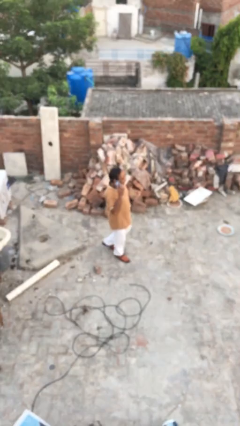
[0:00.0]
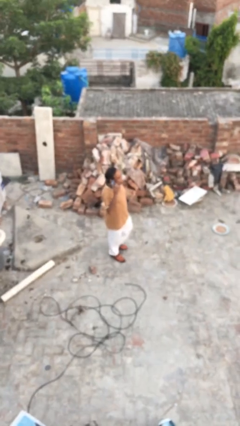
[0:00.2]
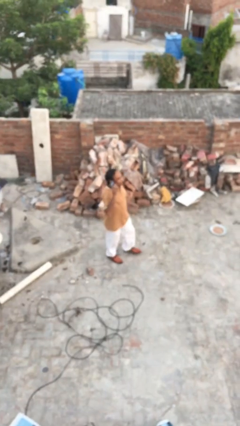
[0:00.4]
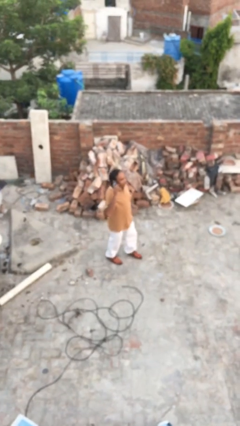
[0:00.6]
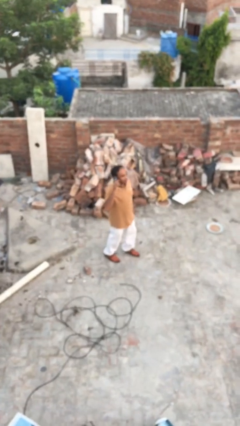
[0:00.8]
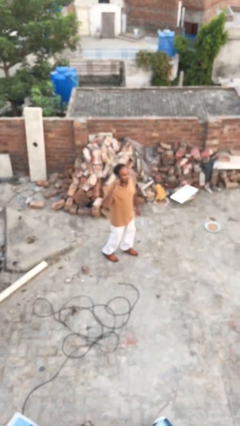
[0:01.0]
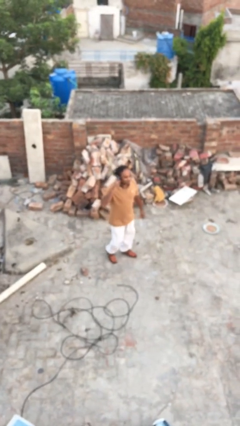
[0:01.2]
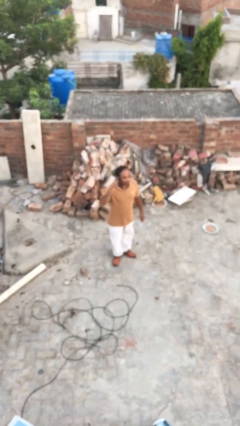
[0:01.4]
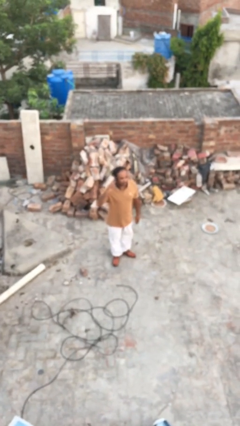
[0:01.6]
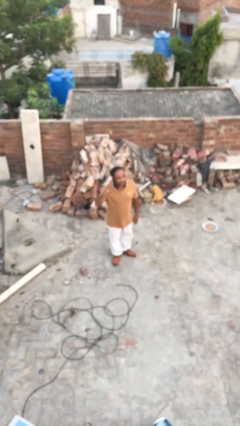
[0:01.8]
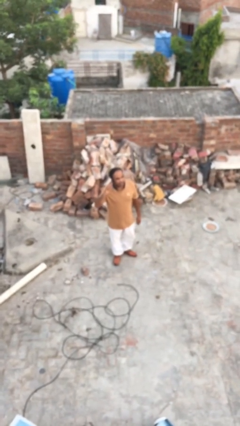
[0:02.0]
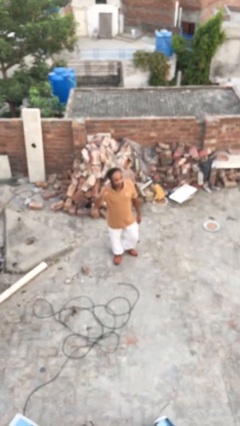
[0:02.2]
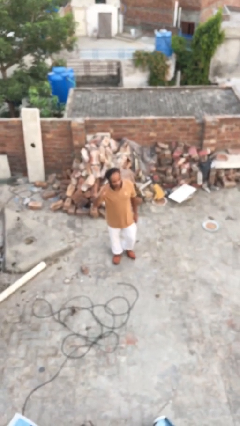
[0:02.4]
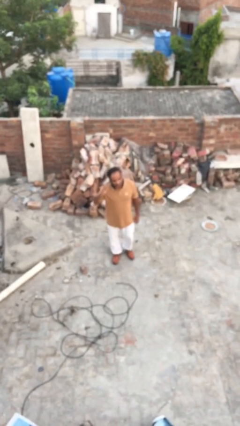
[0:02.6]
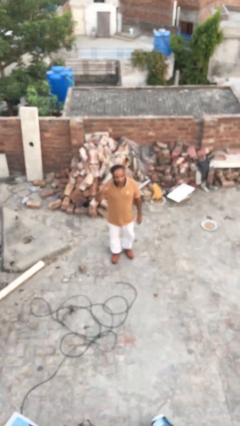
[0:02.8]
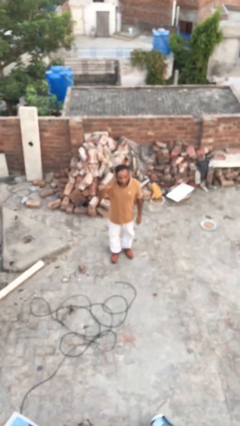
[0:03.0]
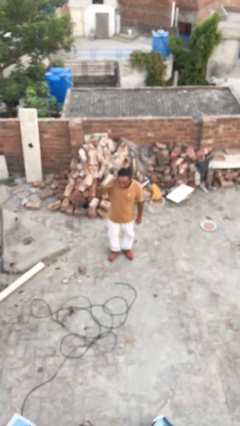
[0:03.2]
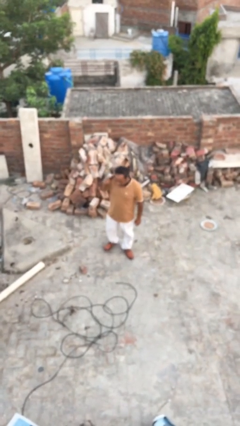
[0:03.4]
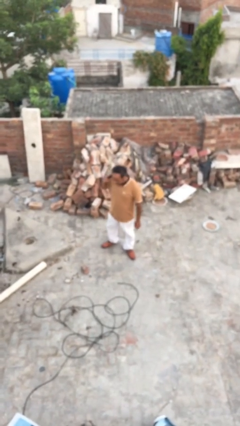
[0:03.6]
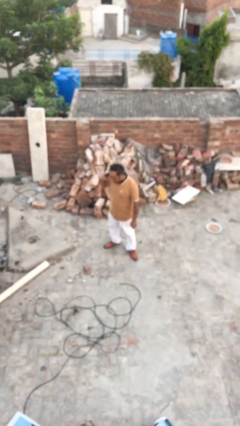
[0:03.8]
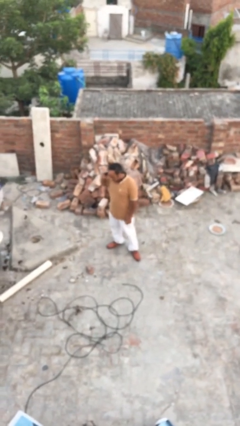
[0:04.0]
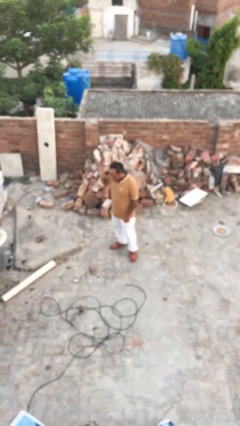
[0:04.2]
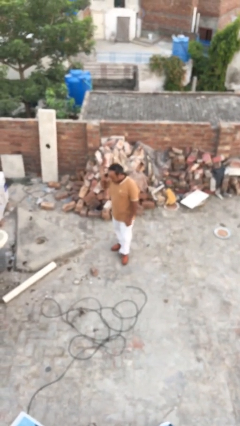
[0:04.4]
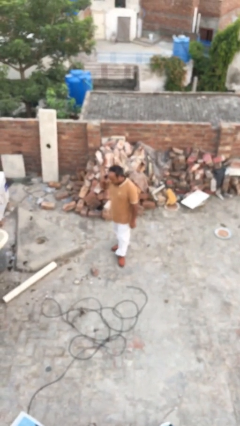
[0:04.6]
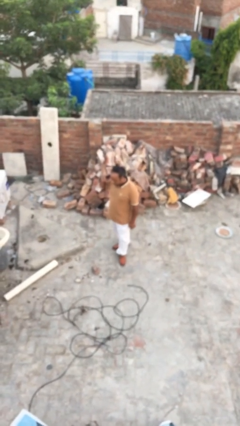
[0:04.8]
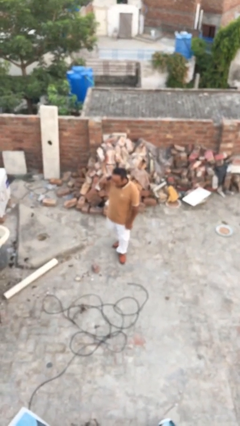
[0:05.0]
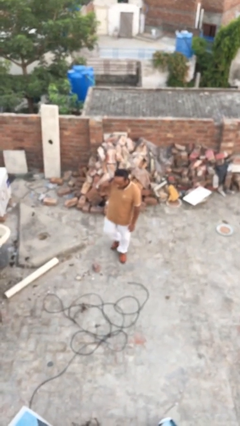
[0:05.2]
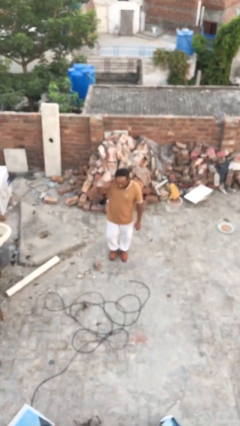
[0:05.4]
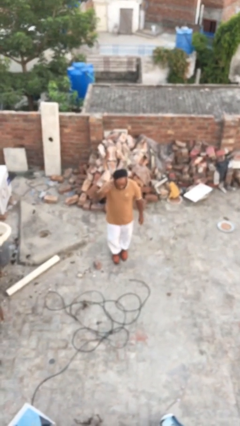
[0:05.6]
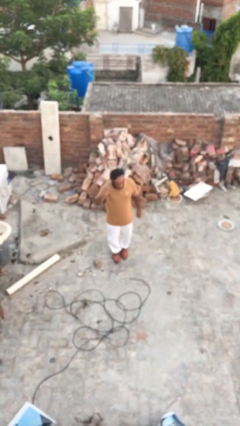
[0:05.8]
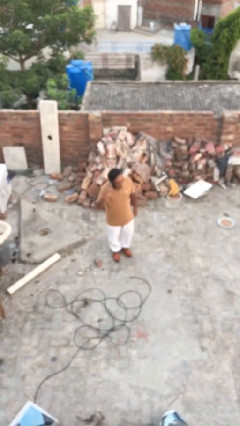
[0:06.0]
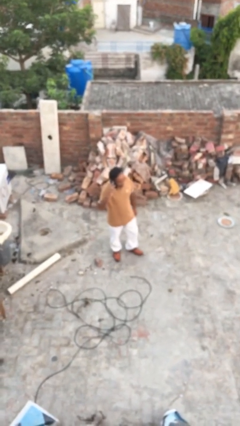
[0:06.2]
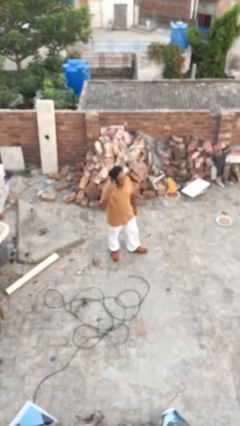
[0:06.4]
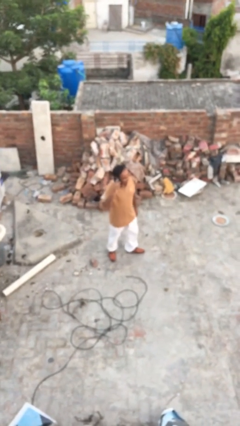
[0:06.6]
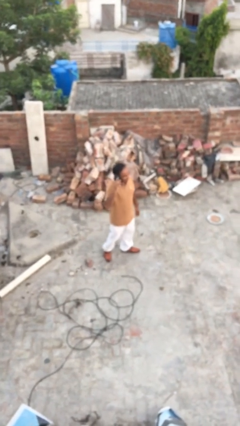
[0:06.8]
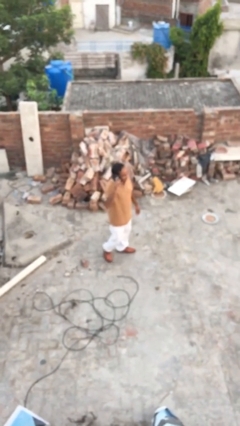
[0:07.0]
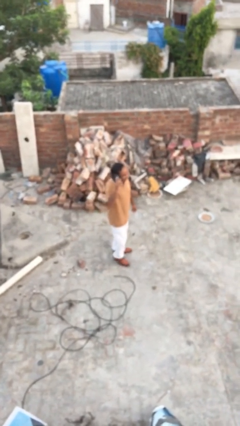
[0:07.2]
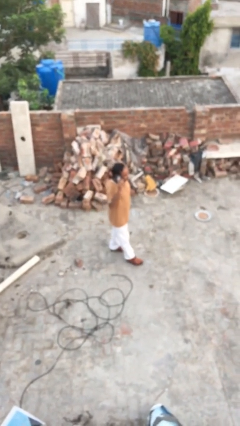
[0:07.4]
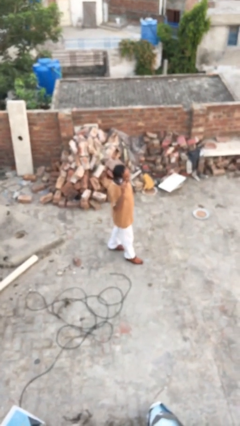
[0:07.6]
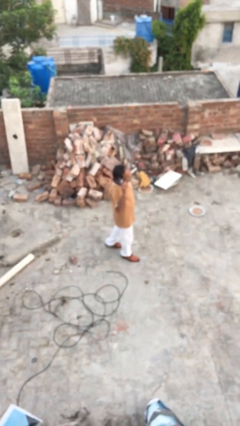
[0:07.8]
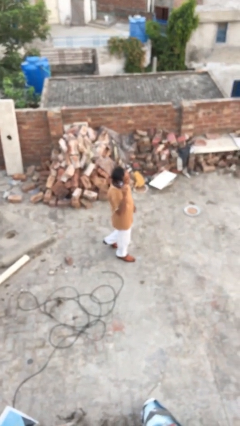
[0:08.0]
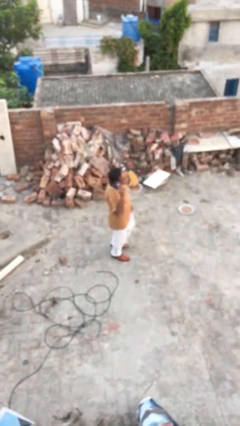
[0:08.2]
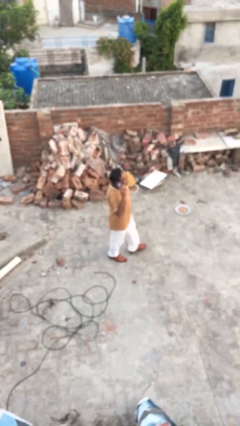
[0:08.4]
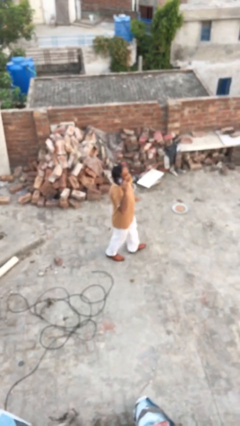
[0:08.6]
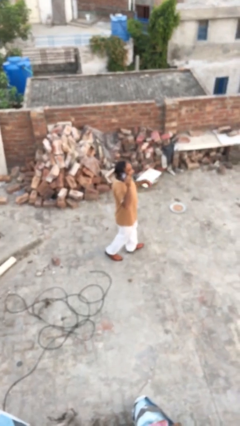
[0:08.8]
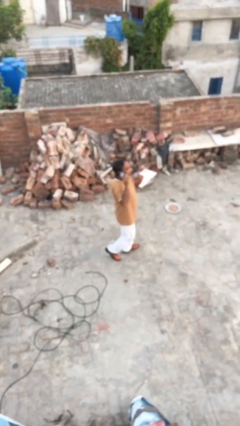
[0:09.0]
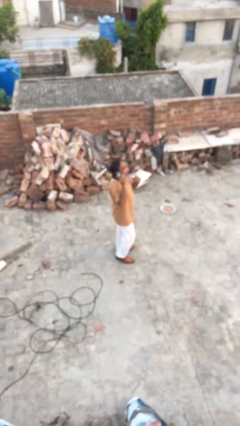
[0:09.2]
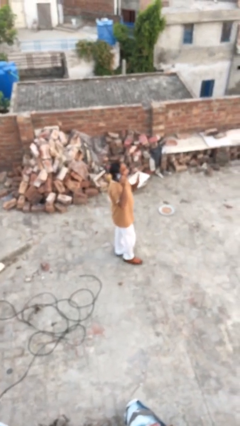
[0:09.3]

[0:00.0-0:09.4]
person talks on phone

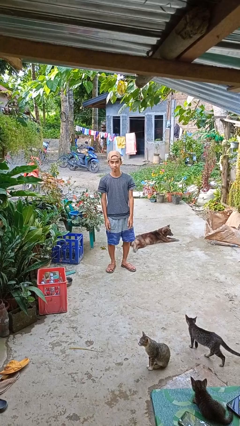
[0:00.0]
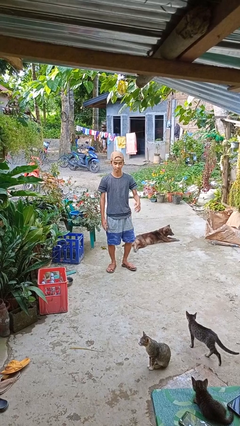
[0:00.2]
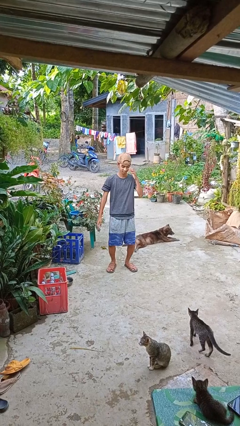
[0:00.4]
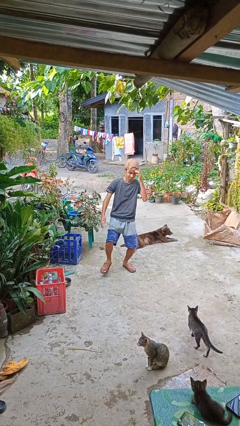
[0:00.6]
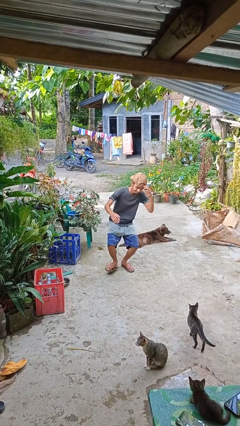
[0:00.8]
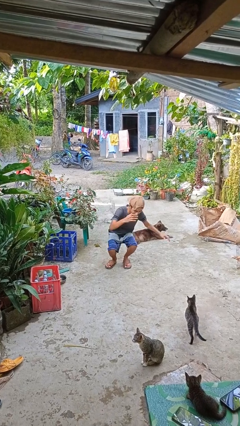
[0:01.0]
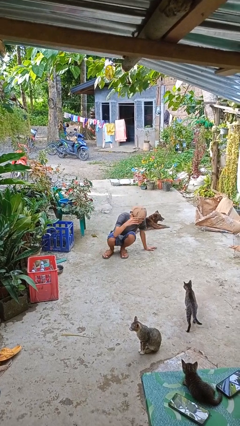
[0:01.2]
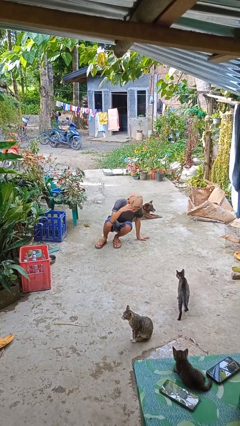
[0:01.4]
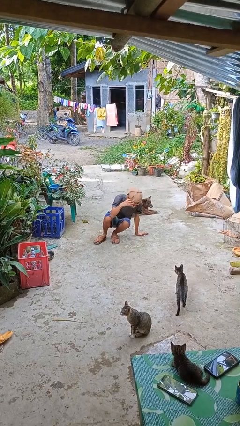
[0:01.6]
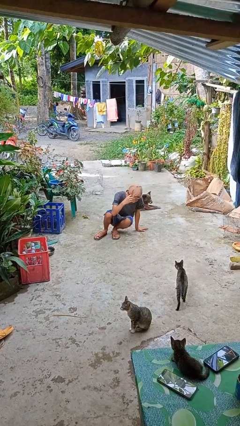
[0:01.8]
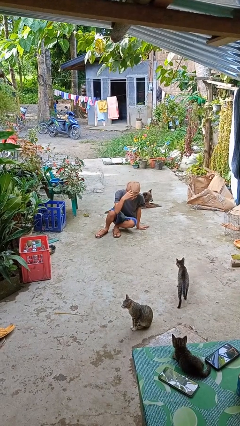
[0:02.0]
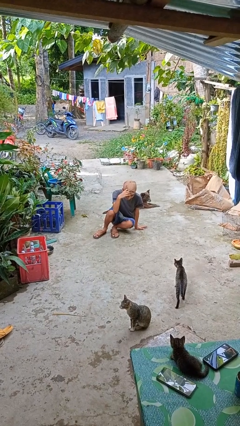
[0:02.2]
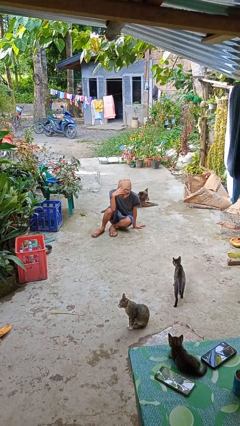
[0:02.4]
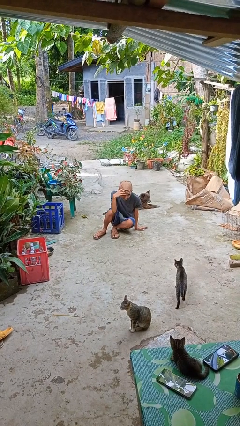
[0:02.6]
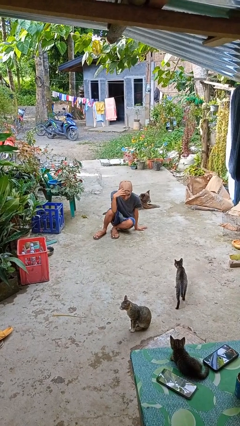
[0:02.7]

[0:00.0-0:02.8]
person falls while standing

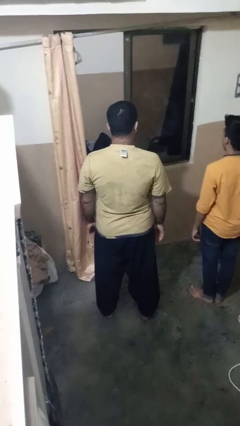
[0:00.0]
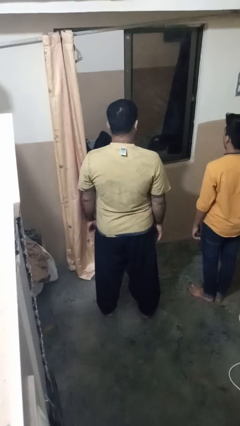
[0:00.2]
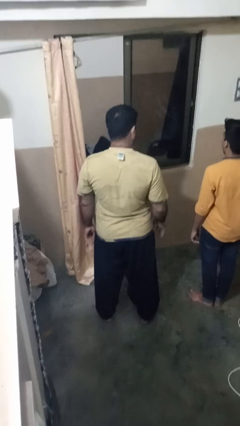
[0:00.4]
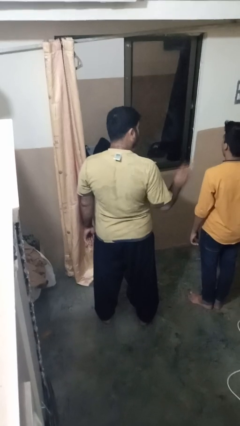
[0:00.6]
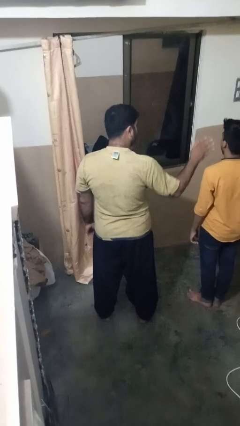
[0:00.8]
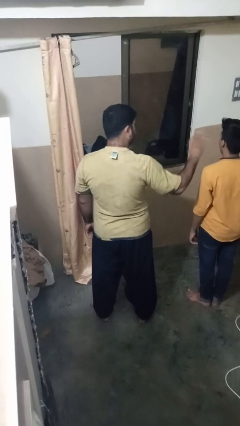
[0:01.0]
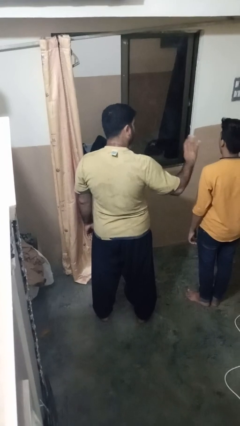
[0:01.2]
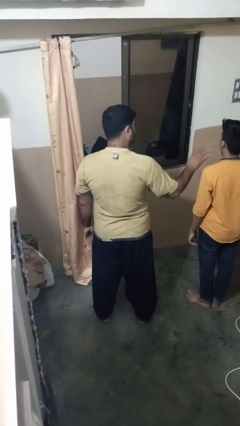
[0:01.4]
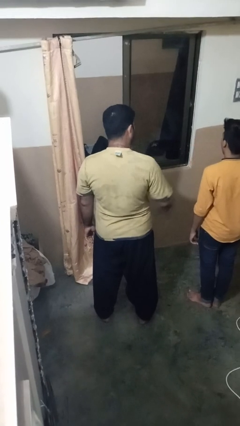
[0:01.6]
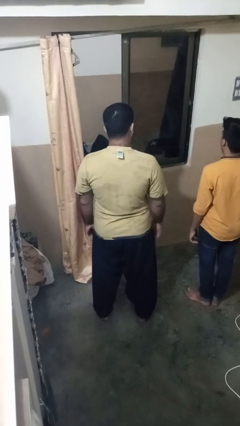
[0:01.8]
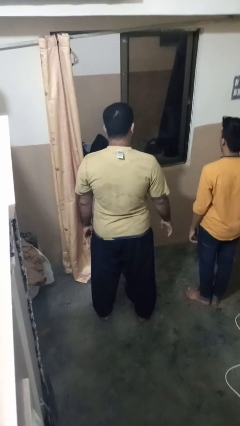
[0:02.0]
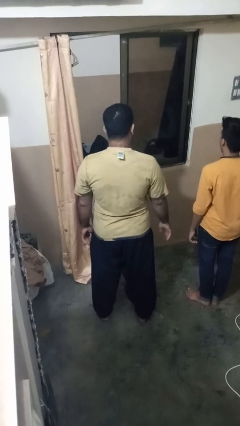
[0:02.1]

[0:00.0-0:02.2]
person waves at person

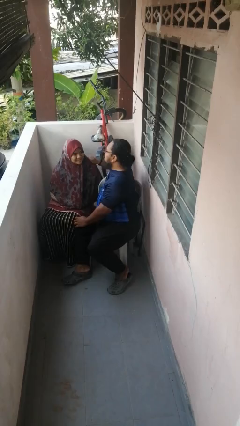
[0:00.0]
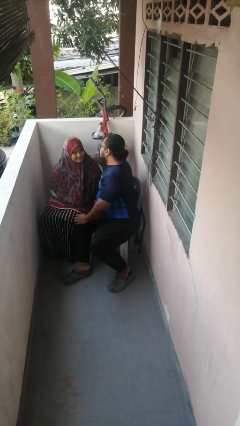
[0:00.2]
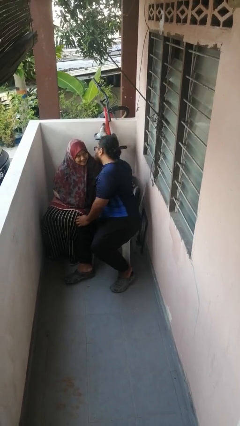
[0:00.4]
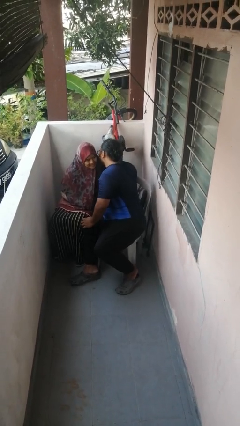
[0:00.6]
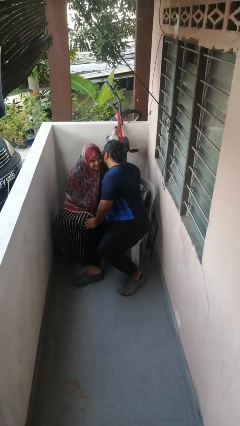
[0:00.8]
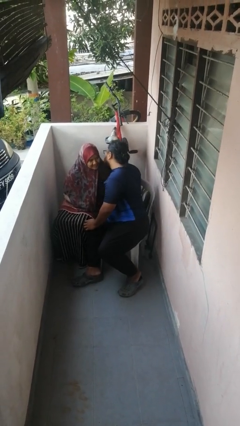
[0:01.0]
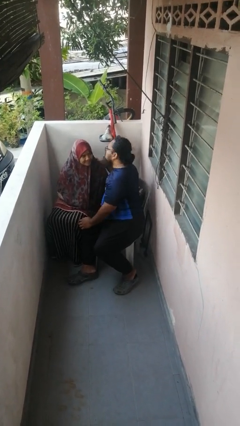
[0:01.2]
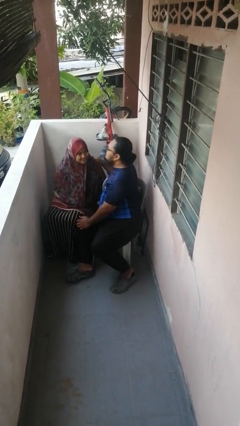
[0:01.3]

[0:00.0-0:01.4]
person kisses cheek of person

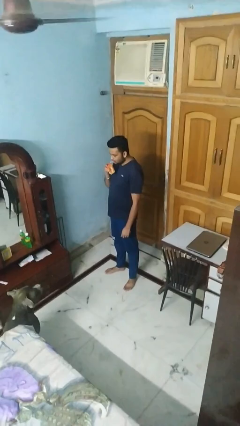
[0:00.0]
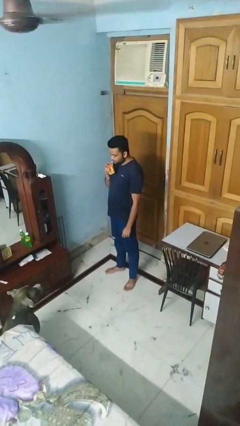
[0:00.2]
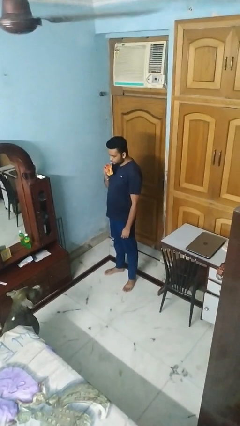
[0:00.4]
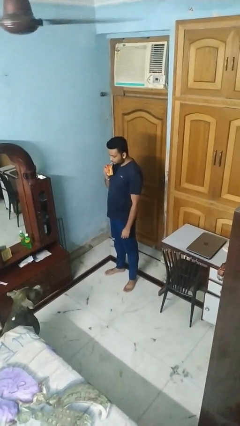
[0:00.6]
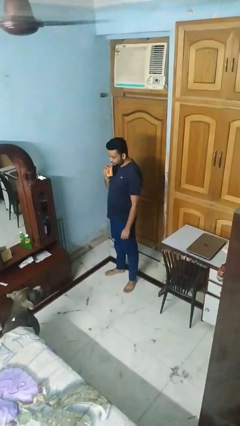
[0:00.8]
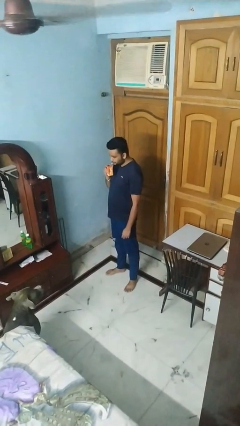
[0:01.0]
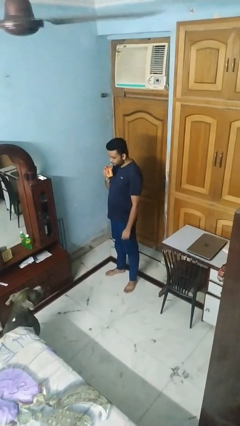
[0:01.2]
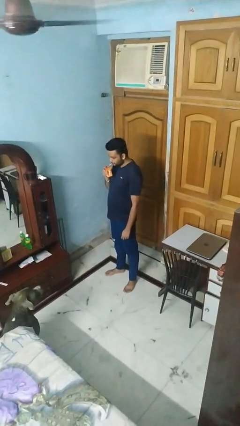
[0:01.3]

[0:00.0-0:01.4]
person drinks from straw
